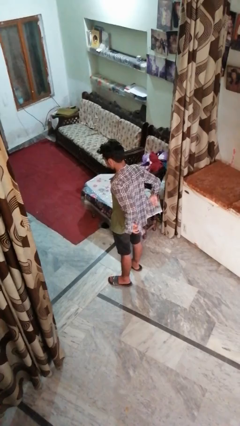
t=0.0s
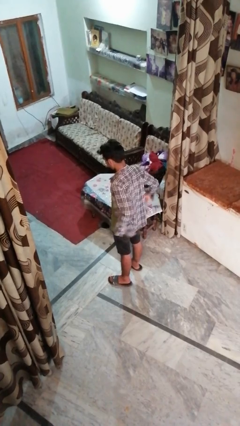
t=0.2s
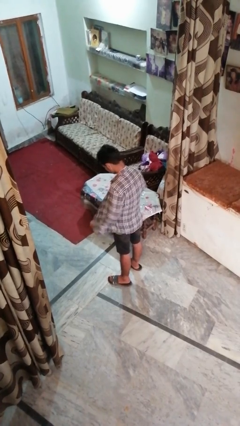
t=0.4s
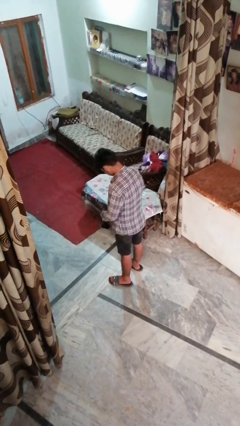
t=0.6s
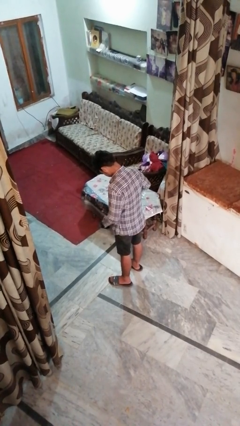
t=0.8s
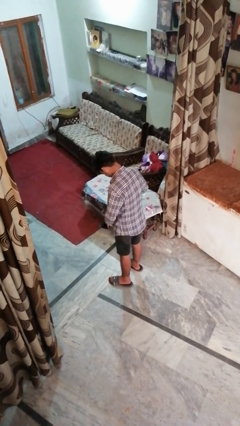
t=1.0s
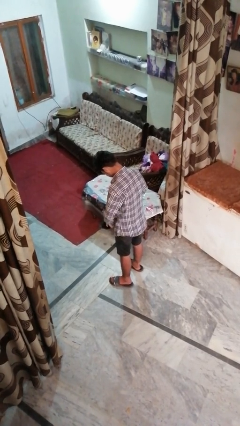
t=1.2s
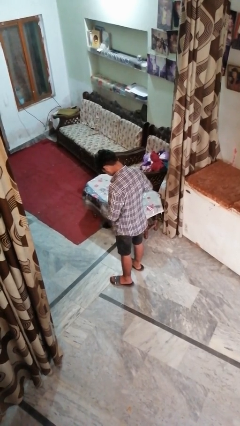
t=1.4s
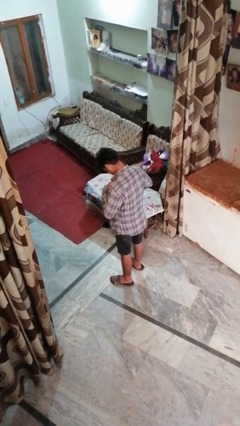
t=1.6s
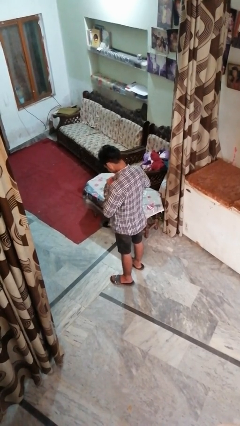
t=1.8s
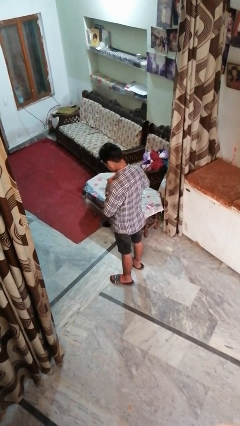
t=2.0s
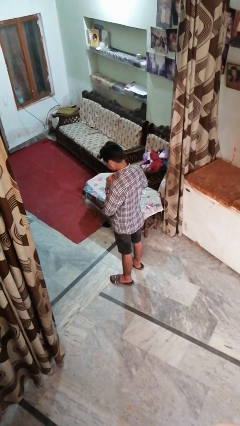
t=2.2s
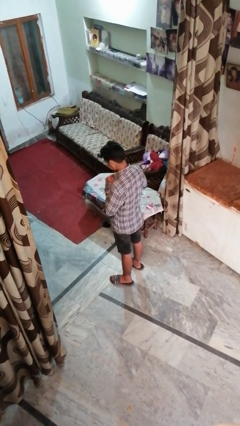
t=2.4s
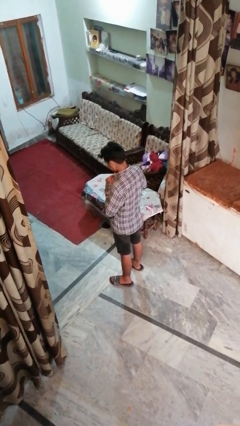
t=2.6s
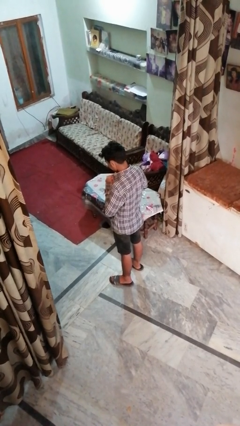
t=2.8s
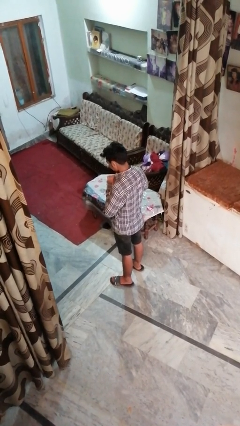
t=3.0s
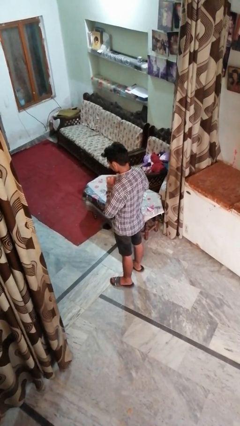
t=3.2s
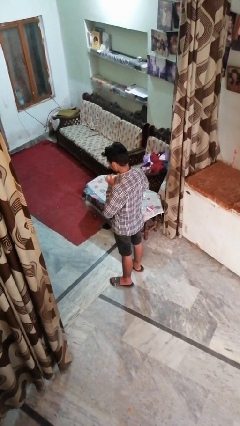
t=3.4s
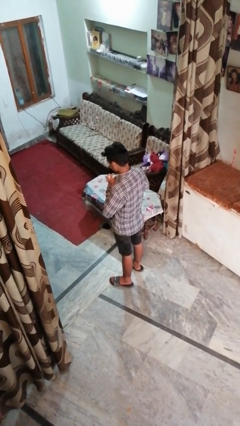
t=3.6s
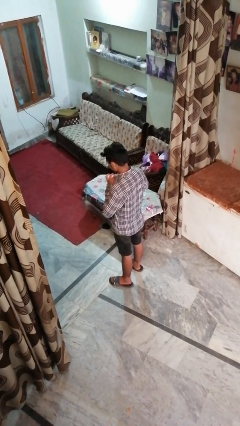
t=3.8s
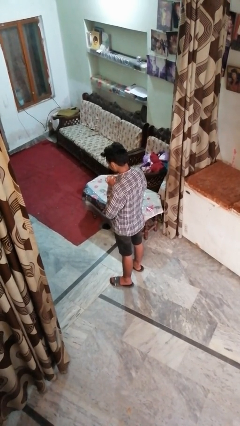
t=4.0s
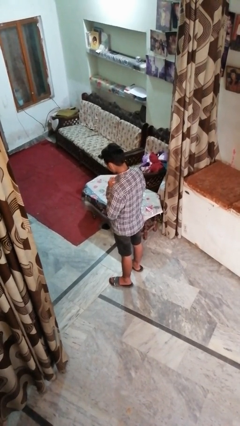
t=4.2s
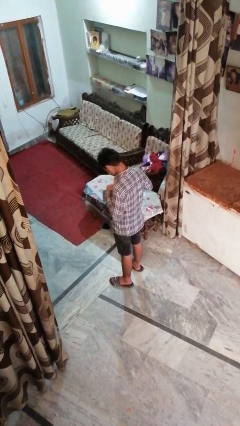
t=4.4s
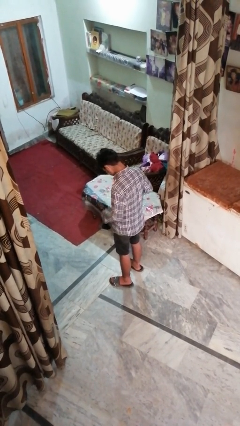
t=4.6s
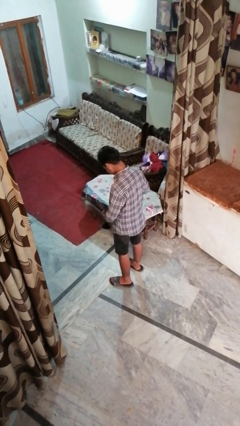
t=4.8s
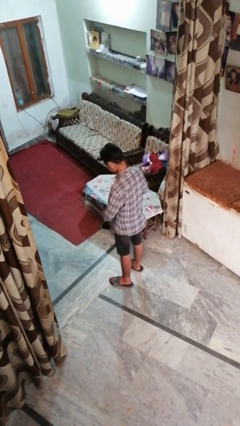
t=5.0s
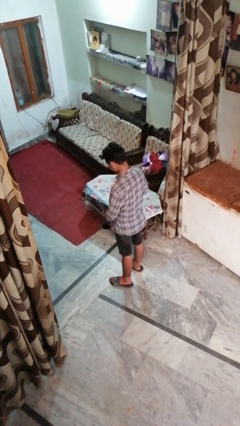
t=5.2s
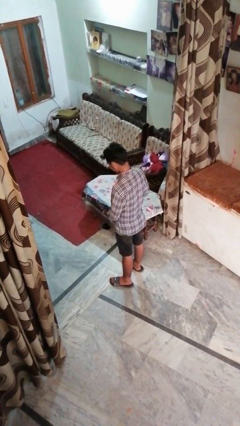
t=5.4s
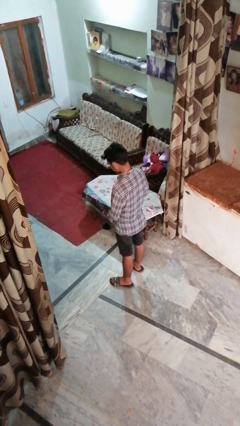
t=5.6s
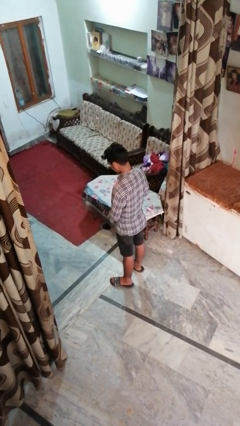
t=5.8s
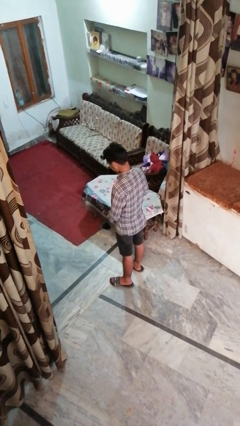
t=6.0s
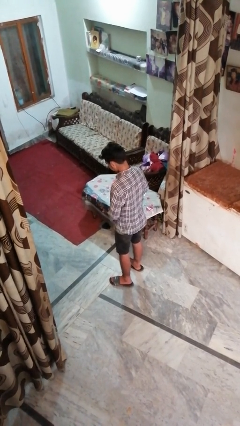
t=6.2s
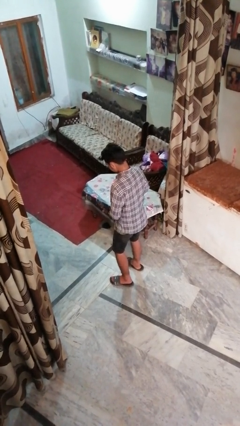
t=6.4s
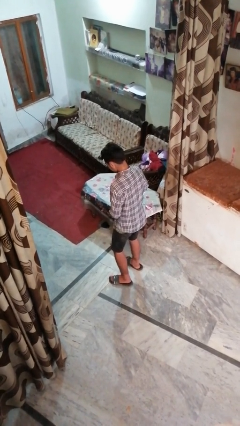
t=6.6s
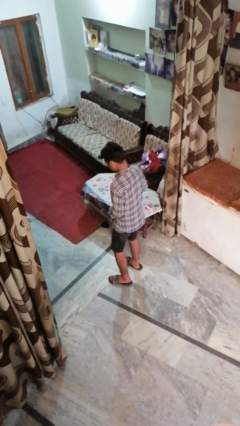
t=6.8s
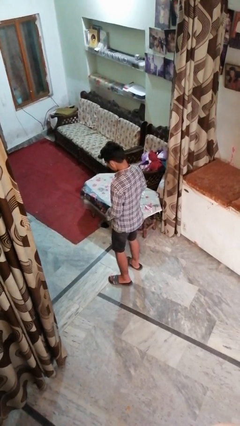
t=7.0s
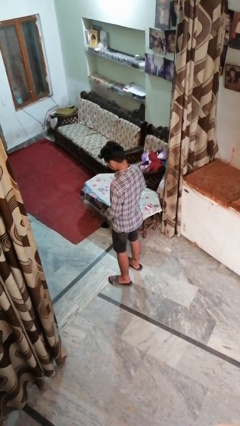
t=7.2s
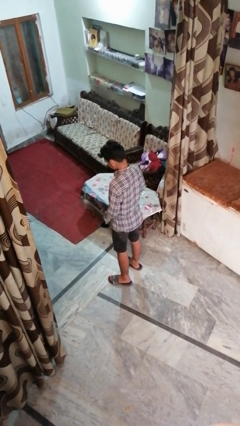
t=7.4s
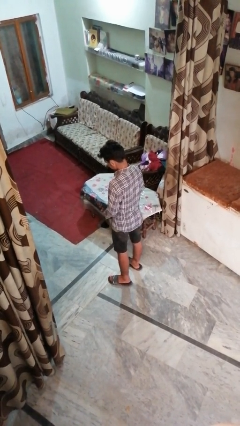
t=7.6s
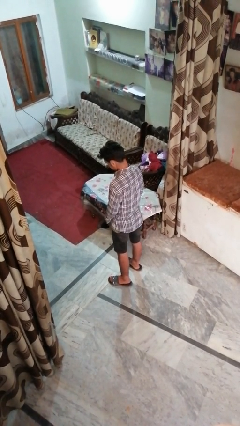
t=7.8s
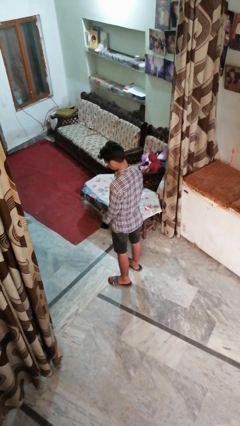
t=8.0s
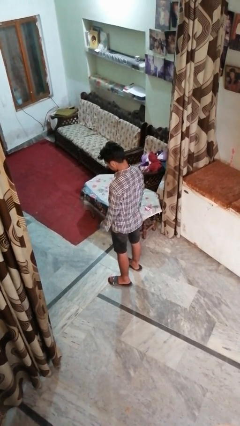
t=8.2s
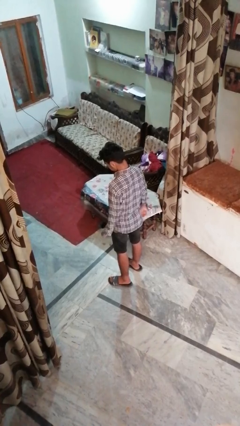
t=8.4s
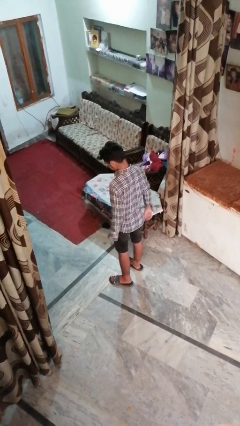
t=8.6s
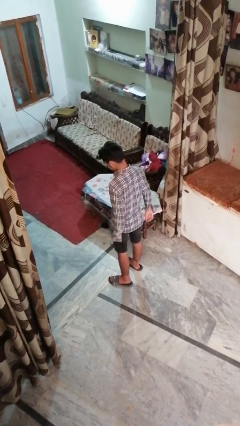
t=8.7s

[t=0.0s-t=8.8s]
person buttons shirt

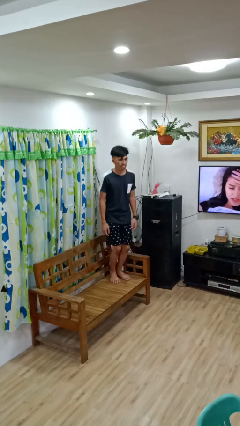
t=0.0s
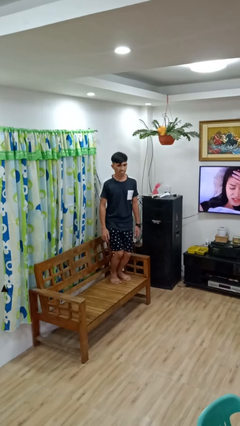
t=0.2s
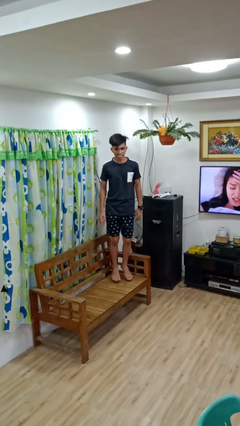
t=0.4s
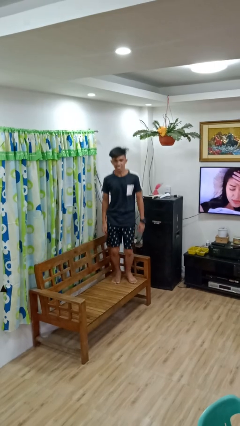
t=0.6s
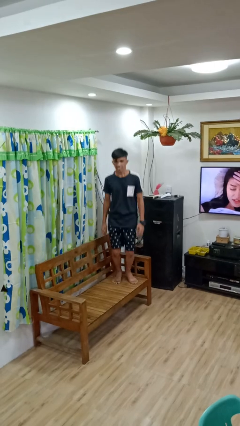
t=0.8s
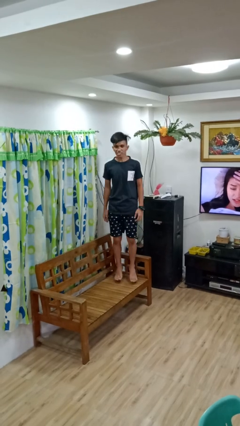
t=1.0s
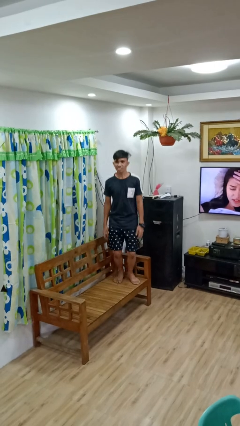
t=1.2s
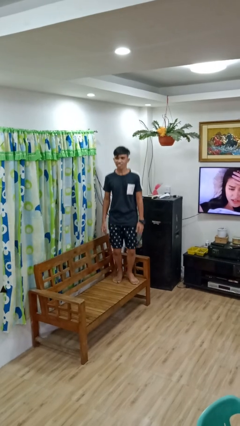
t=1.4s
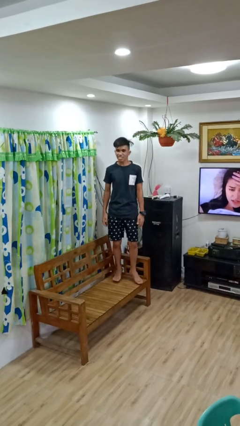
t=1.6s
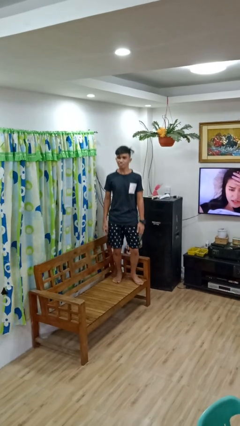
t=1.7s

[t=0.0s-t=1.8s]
person jumps on couch

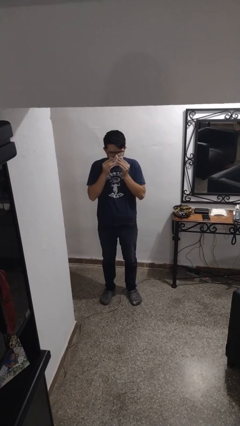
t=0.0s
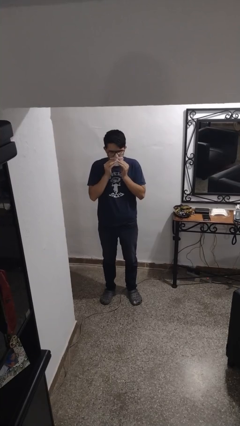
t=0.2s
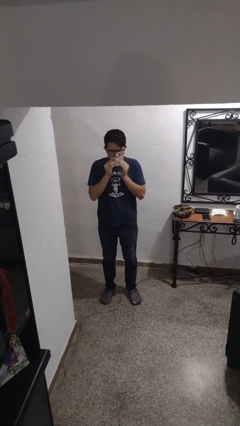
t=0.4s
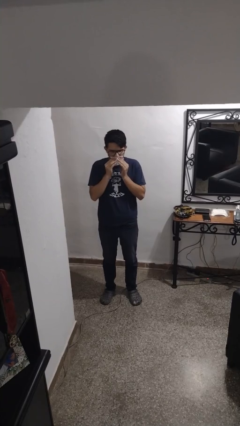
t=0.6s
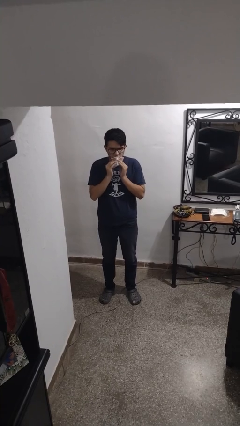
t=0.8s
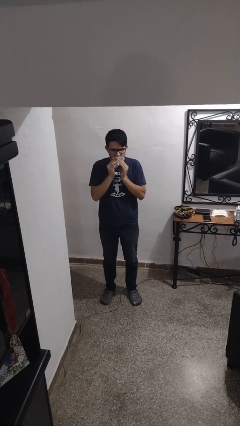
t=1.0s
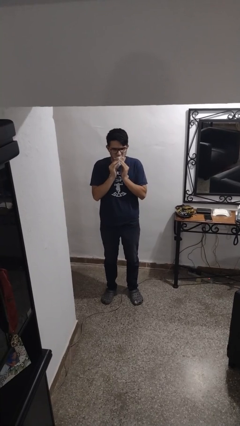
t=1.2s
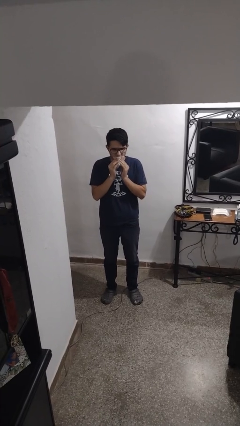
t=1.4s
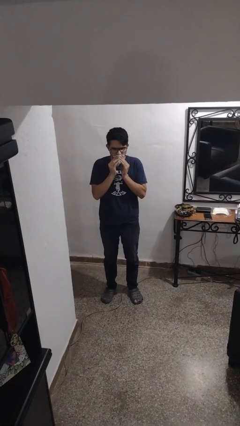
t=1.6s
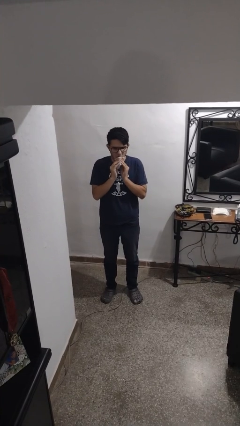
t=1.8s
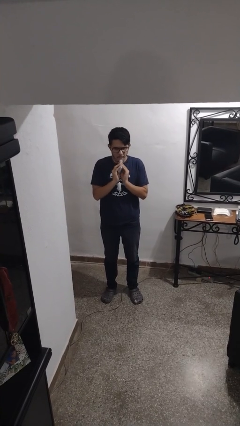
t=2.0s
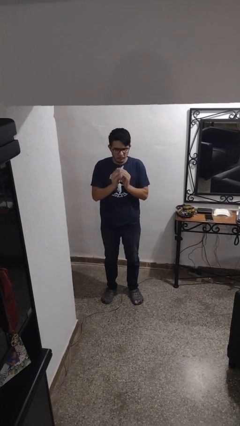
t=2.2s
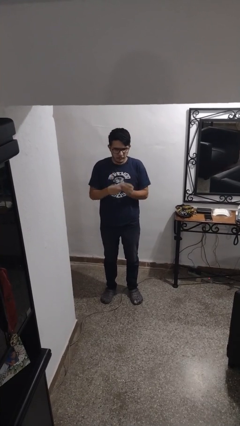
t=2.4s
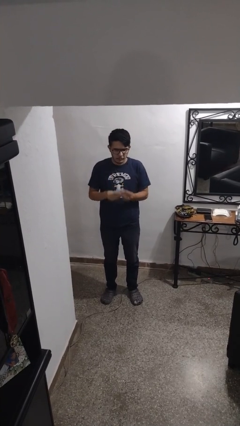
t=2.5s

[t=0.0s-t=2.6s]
person wipes mouth with napkin

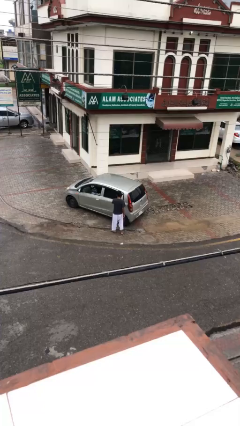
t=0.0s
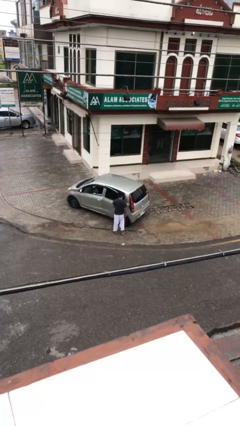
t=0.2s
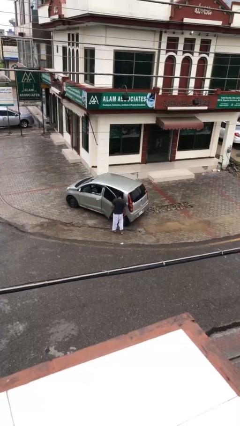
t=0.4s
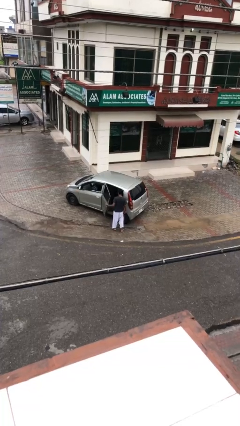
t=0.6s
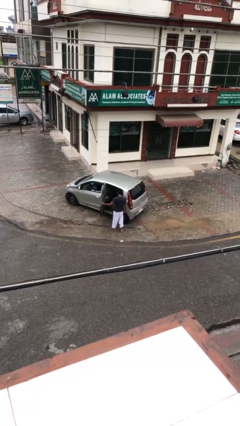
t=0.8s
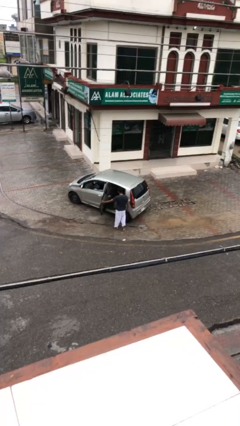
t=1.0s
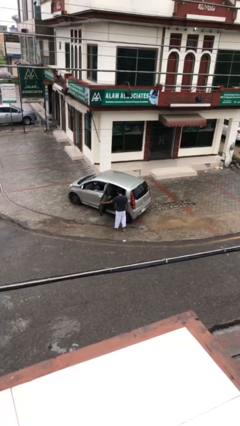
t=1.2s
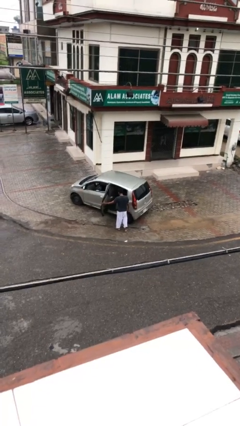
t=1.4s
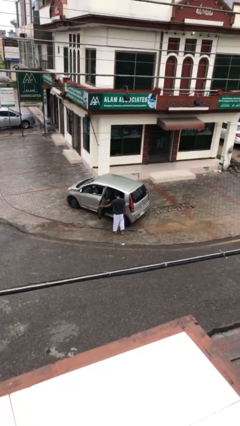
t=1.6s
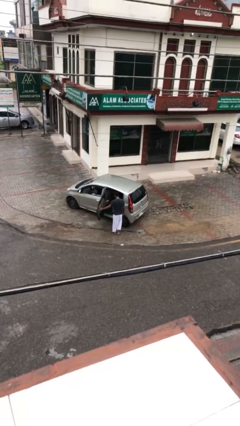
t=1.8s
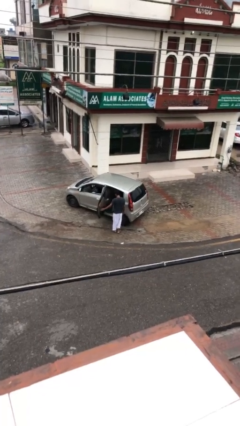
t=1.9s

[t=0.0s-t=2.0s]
person opens car door

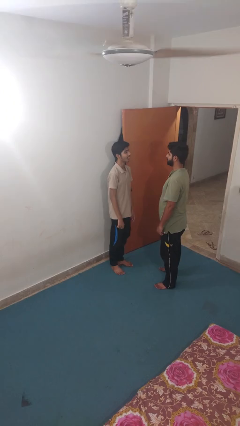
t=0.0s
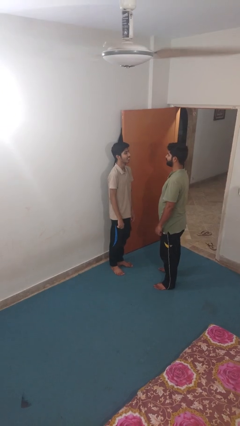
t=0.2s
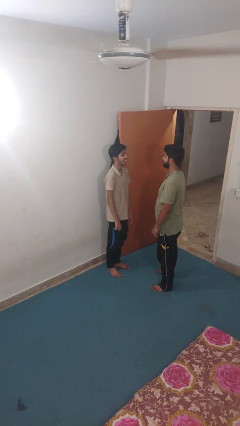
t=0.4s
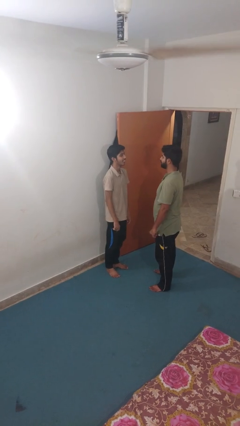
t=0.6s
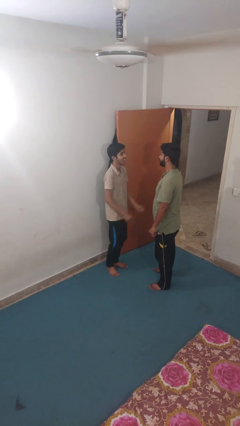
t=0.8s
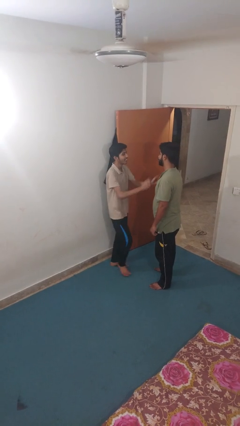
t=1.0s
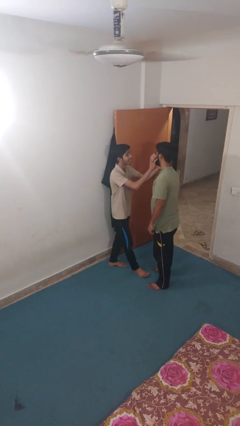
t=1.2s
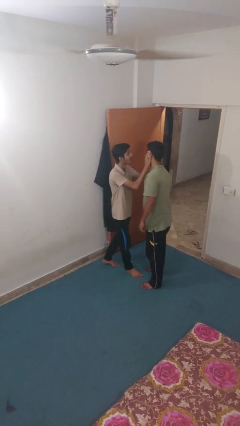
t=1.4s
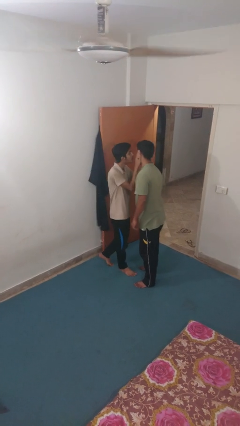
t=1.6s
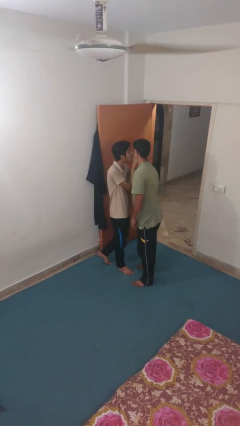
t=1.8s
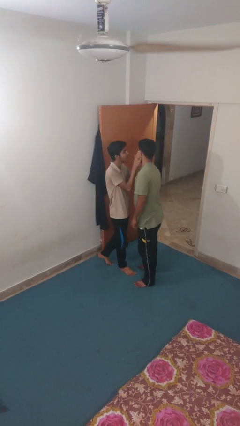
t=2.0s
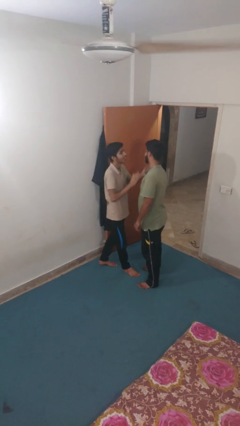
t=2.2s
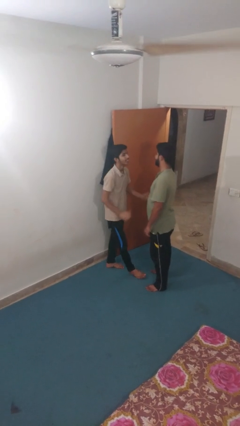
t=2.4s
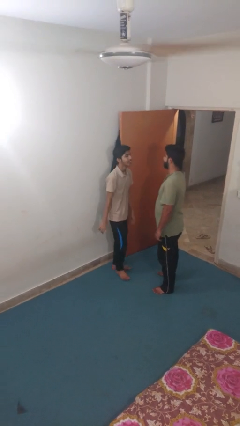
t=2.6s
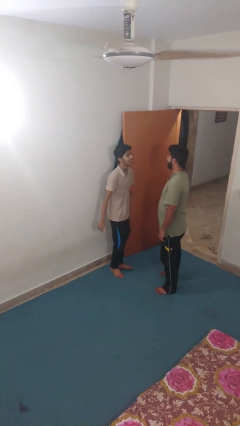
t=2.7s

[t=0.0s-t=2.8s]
person kisses cheek of person
